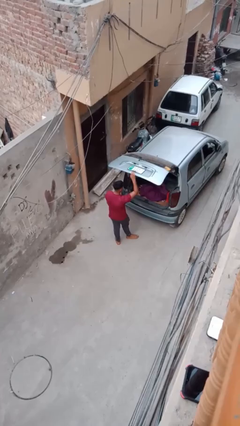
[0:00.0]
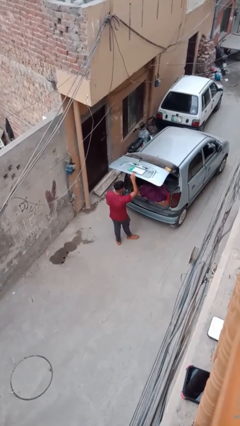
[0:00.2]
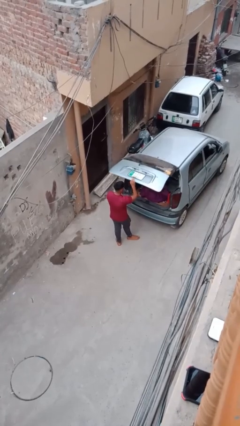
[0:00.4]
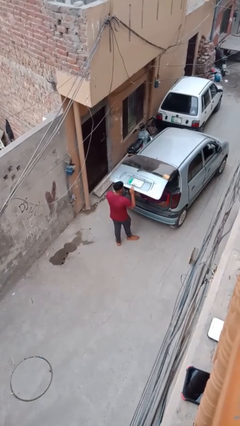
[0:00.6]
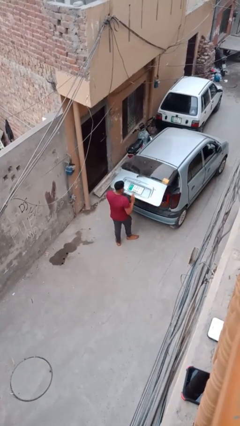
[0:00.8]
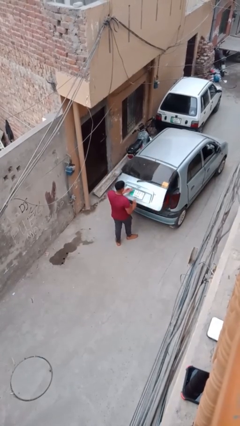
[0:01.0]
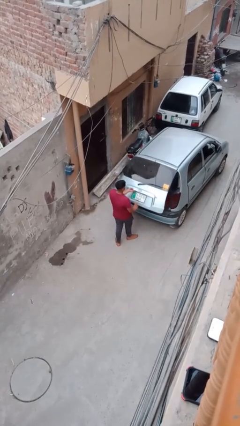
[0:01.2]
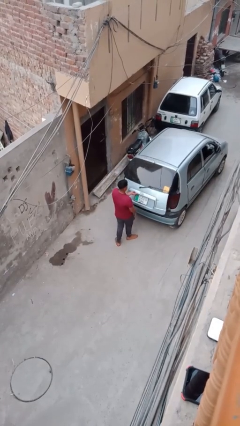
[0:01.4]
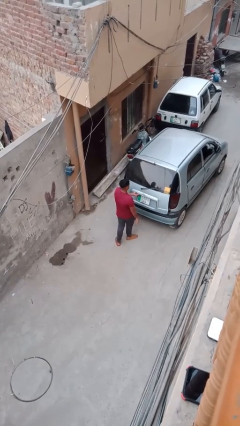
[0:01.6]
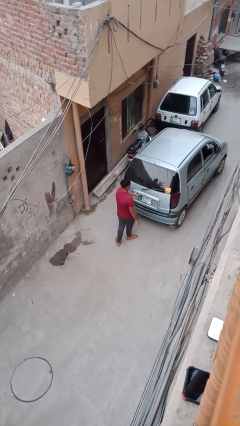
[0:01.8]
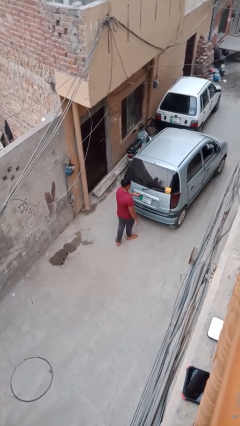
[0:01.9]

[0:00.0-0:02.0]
person closes car trunk

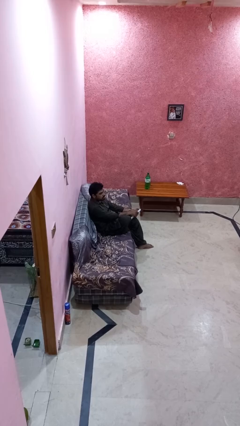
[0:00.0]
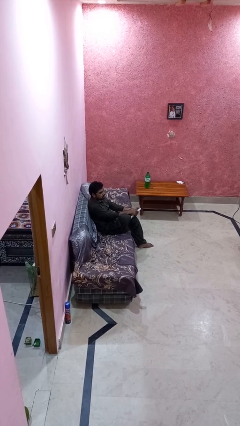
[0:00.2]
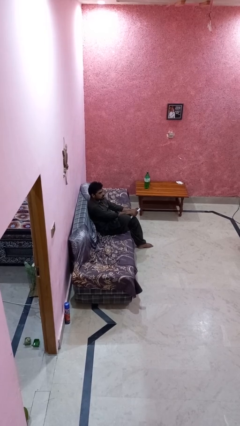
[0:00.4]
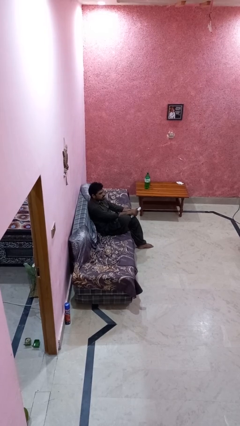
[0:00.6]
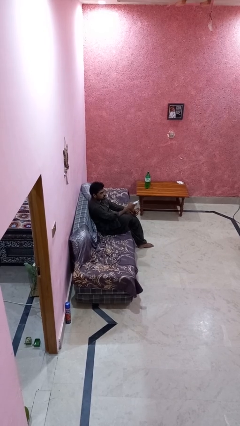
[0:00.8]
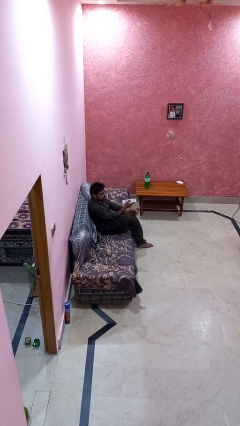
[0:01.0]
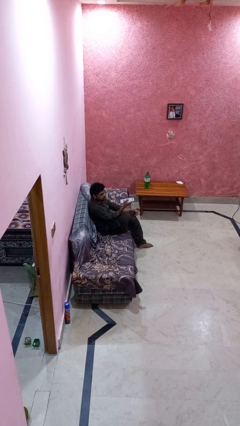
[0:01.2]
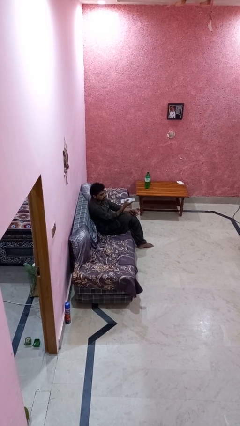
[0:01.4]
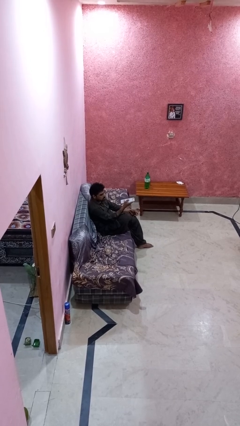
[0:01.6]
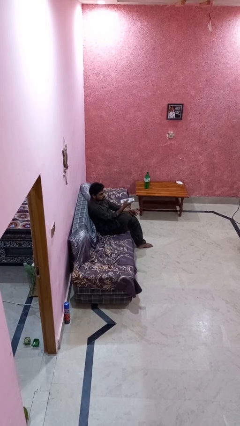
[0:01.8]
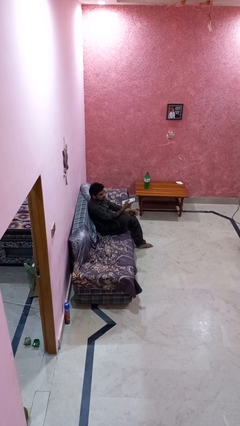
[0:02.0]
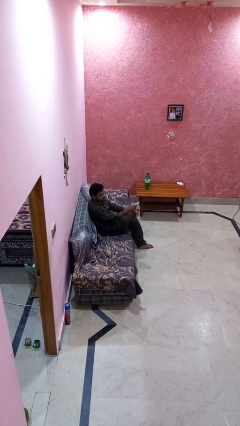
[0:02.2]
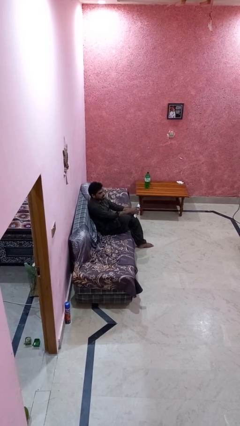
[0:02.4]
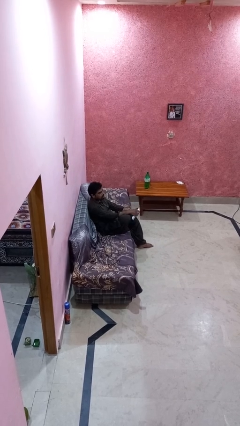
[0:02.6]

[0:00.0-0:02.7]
person uses television remote

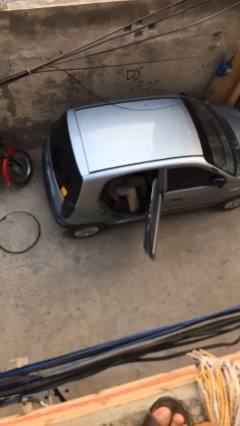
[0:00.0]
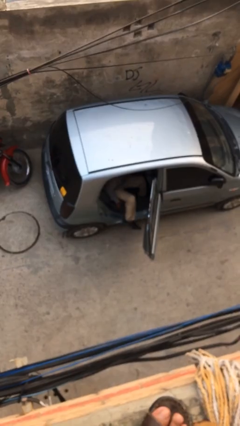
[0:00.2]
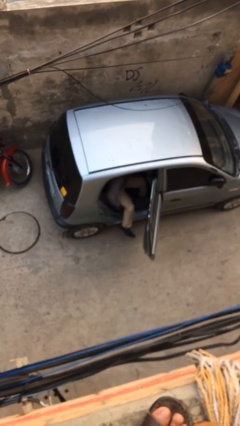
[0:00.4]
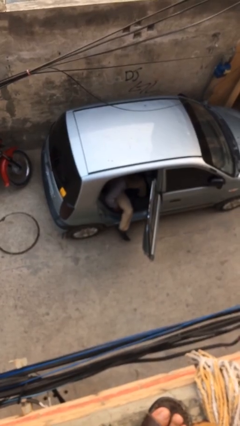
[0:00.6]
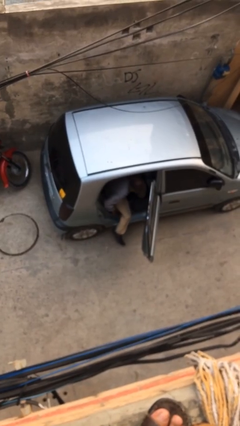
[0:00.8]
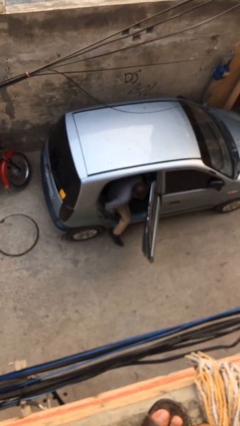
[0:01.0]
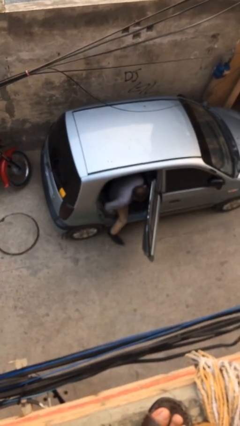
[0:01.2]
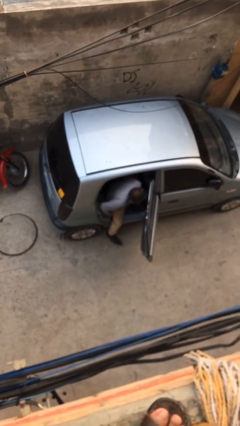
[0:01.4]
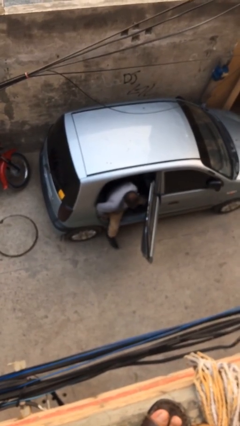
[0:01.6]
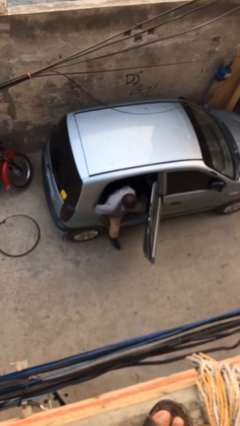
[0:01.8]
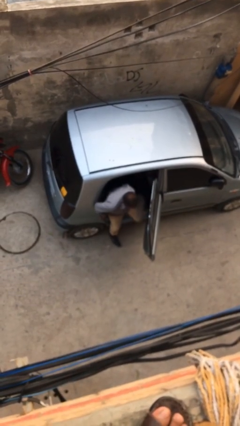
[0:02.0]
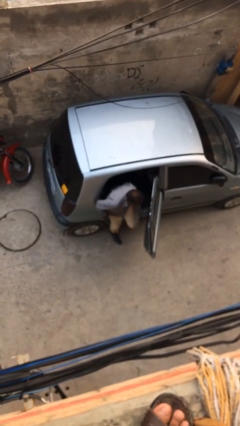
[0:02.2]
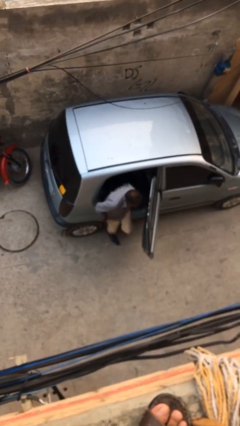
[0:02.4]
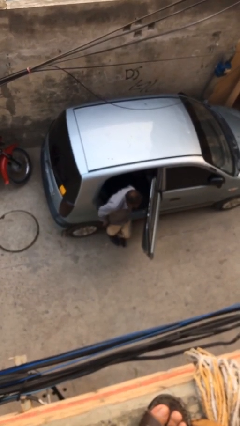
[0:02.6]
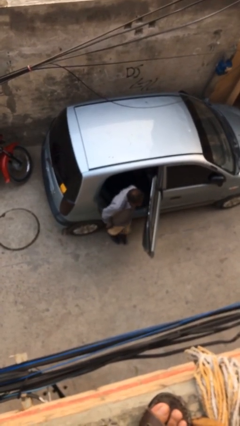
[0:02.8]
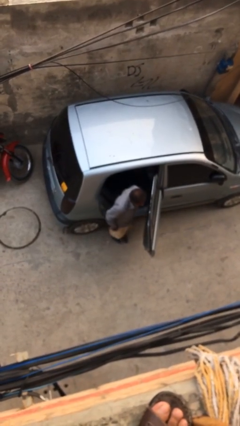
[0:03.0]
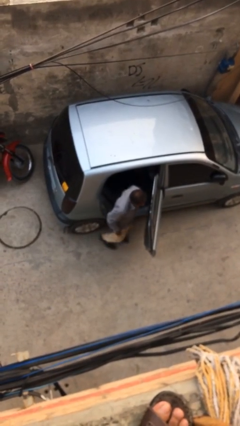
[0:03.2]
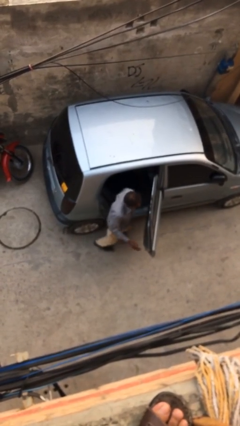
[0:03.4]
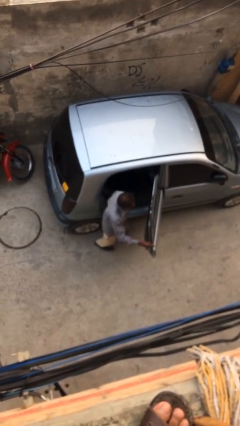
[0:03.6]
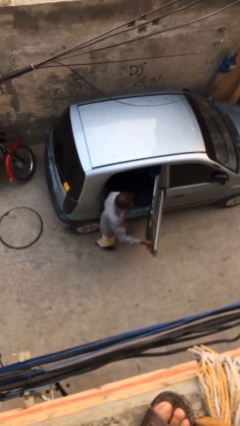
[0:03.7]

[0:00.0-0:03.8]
person exits car

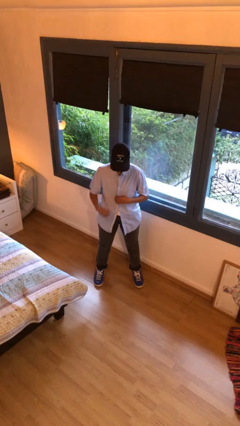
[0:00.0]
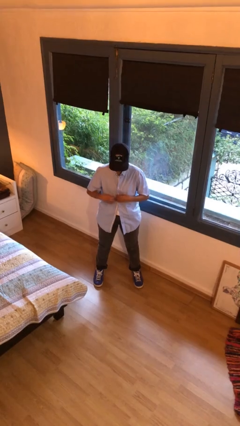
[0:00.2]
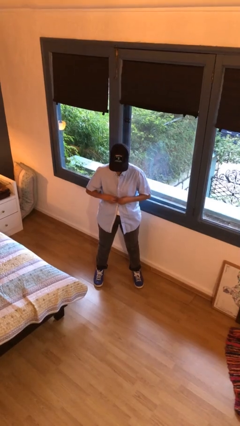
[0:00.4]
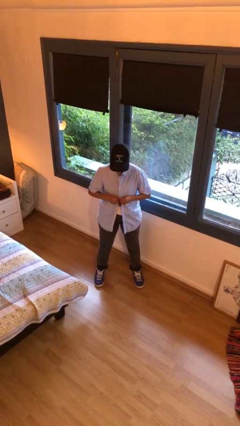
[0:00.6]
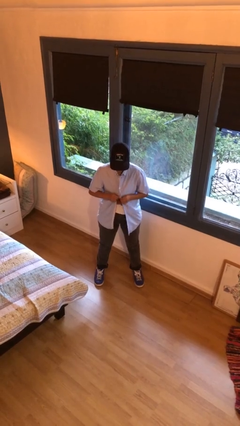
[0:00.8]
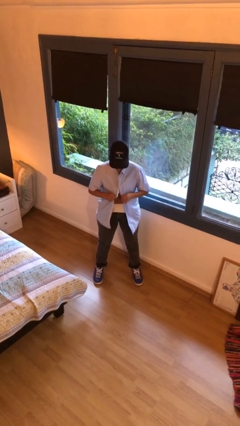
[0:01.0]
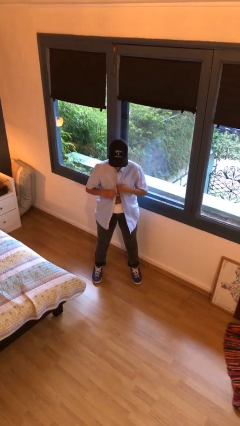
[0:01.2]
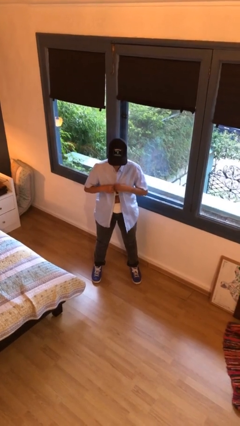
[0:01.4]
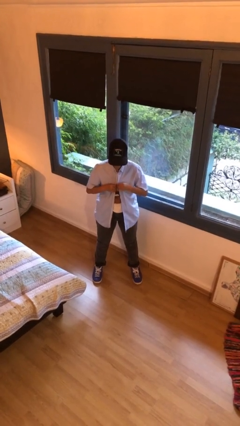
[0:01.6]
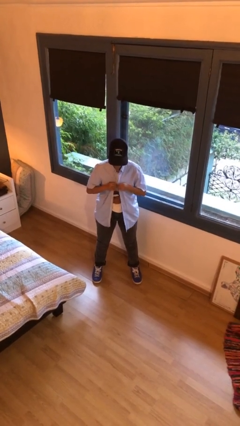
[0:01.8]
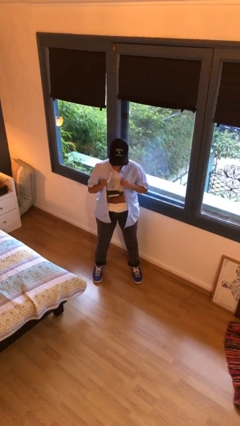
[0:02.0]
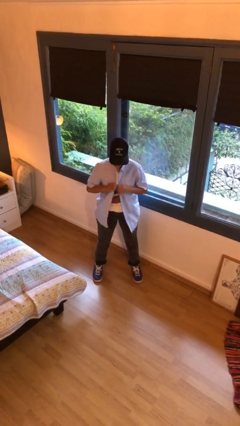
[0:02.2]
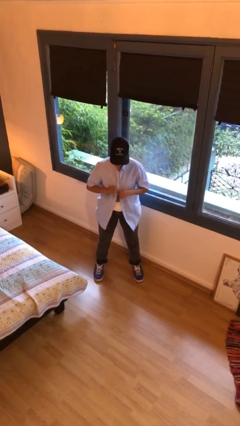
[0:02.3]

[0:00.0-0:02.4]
person unbuttons shirt

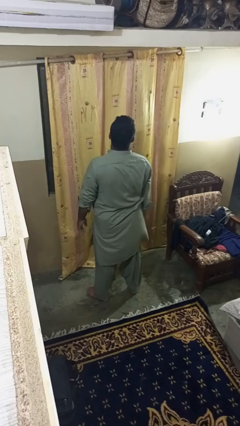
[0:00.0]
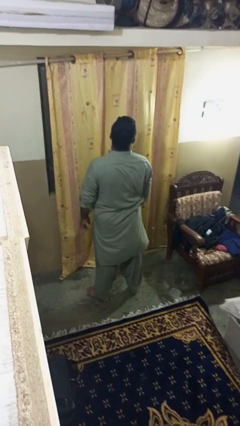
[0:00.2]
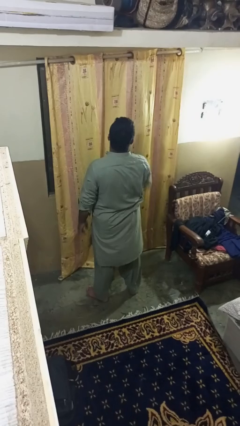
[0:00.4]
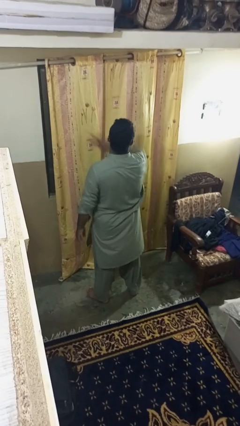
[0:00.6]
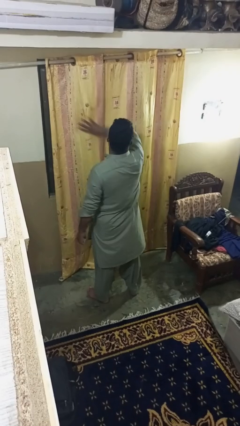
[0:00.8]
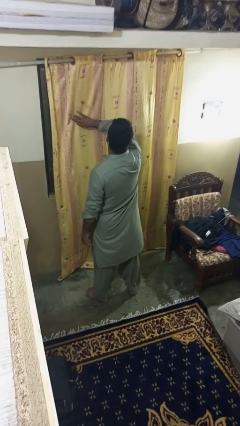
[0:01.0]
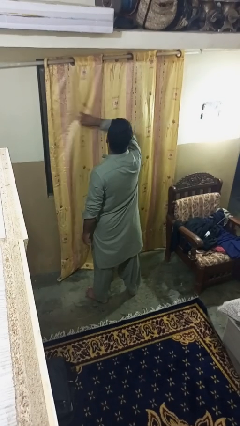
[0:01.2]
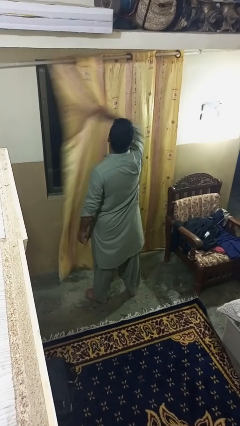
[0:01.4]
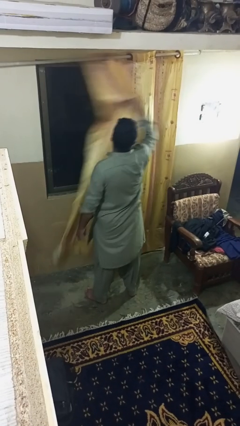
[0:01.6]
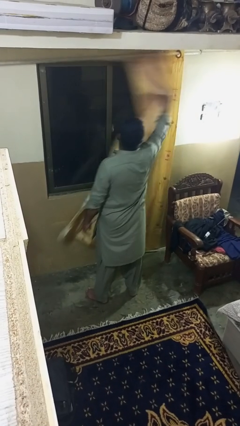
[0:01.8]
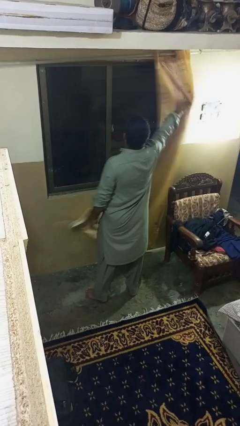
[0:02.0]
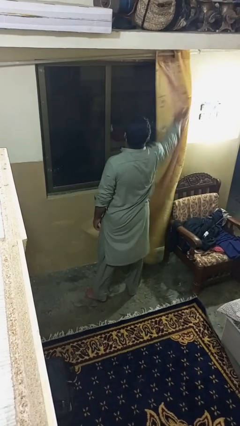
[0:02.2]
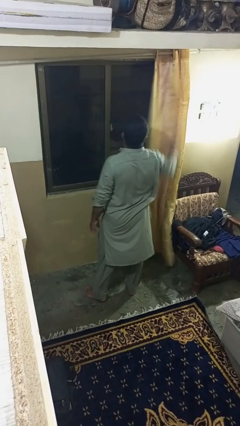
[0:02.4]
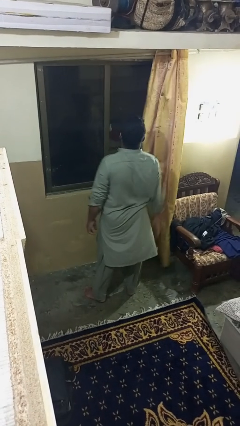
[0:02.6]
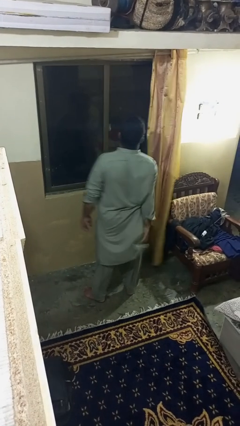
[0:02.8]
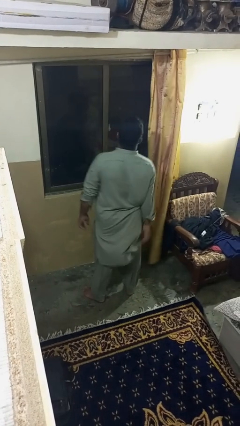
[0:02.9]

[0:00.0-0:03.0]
person opens curtains

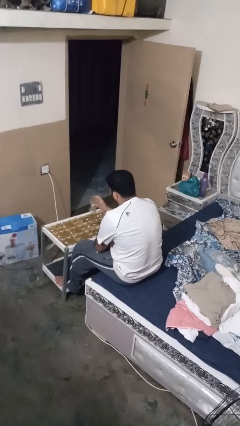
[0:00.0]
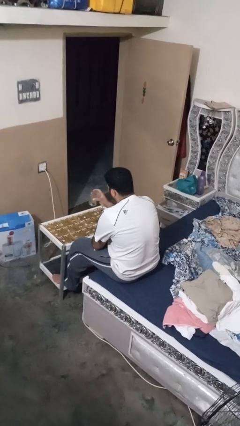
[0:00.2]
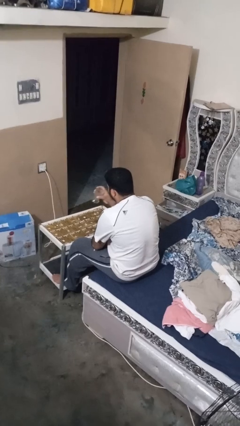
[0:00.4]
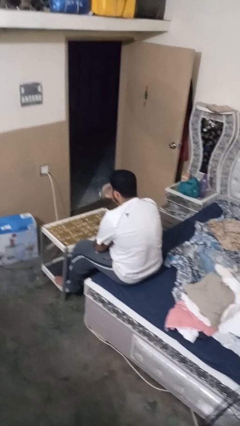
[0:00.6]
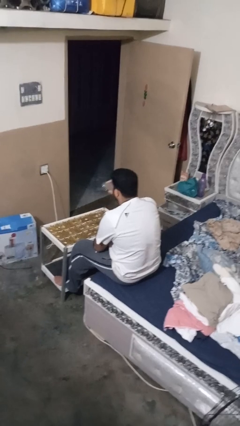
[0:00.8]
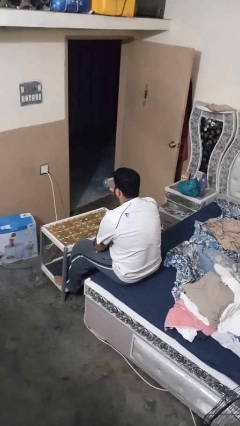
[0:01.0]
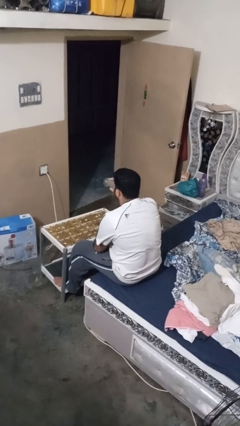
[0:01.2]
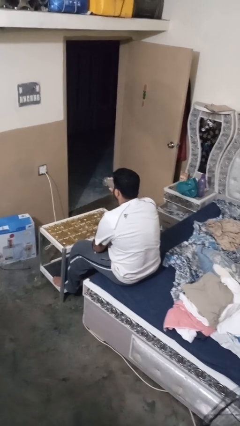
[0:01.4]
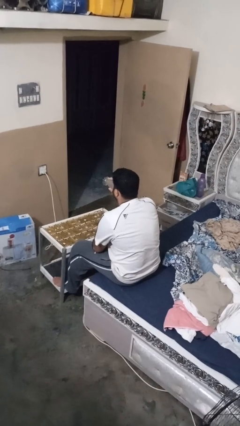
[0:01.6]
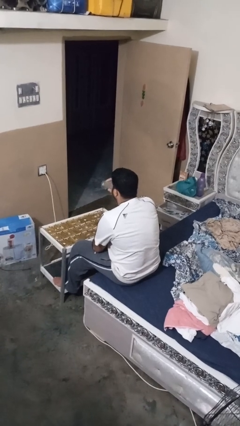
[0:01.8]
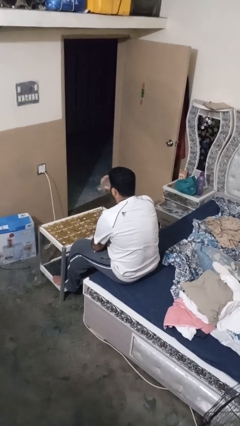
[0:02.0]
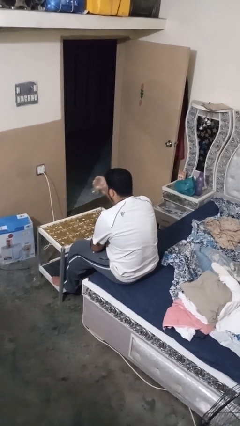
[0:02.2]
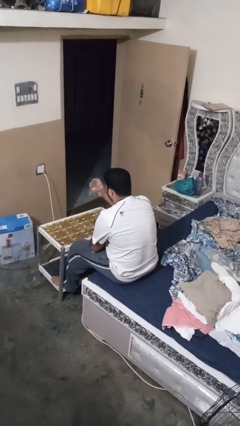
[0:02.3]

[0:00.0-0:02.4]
person drinks from shotglass

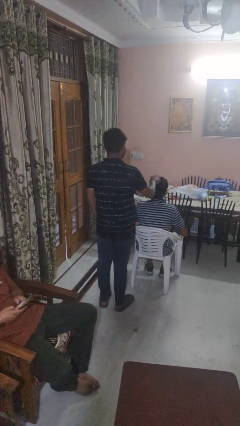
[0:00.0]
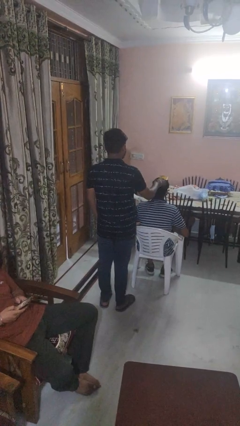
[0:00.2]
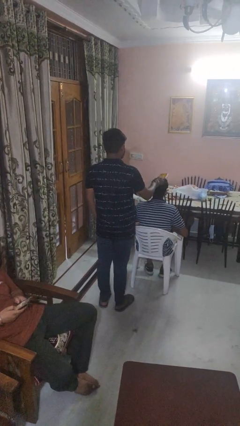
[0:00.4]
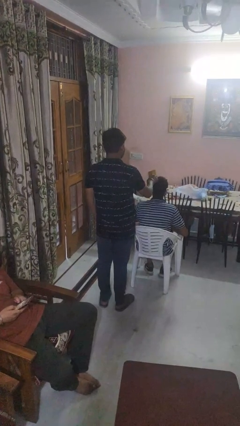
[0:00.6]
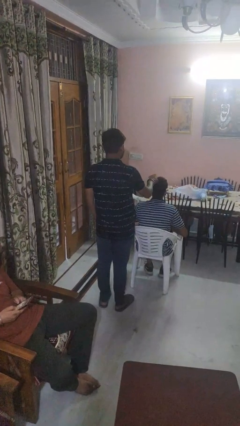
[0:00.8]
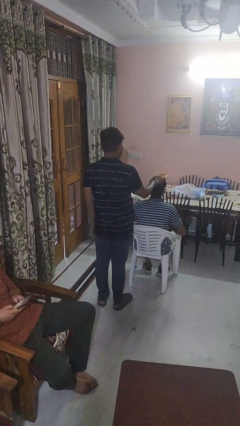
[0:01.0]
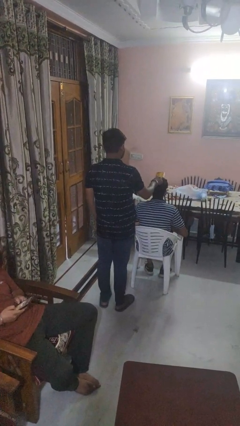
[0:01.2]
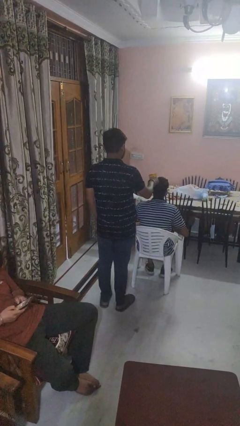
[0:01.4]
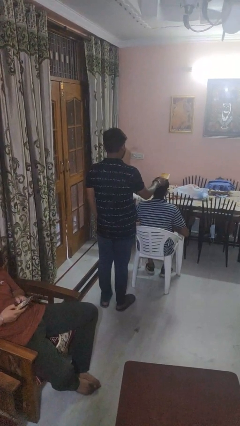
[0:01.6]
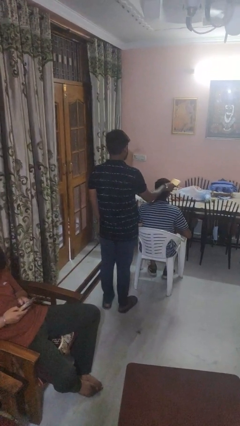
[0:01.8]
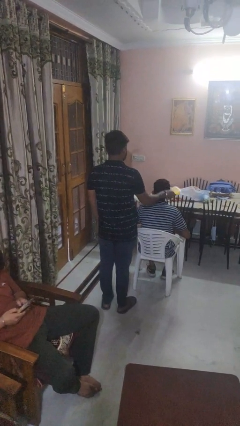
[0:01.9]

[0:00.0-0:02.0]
person brushes hair of person
